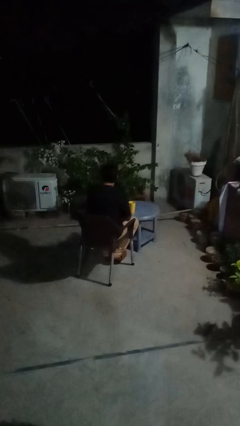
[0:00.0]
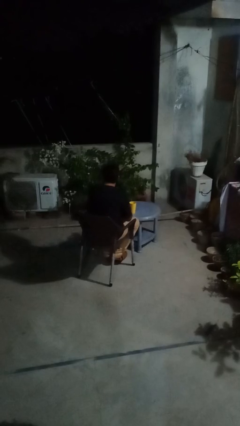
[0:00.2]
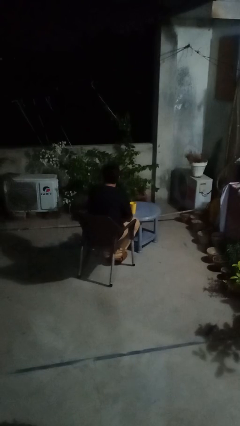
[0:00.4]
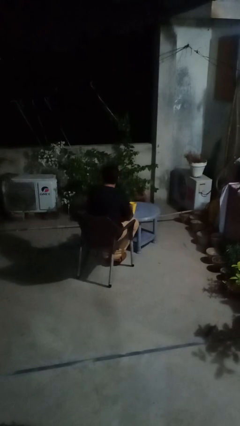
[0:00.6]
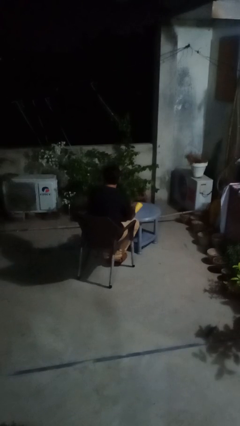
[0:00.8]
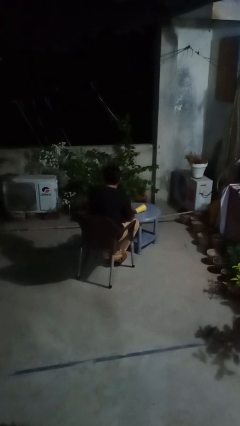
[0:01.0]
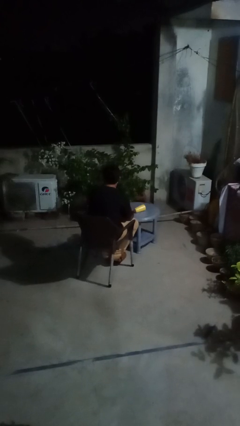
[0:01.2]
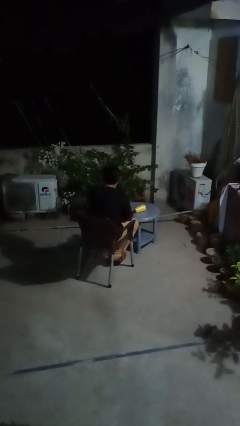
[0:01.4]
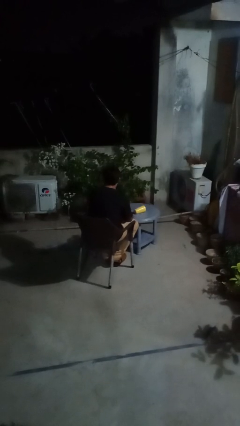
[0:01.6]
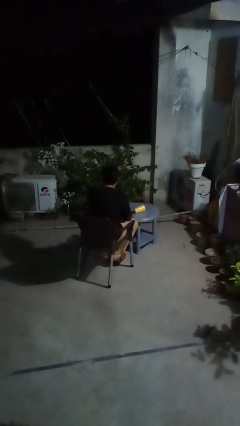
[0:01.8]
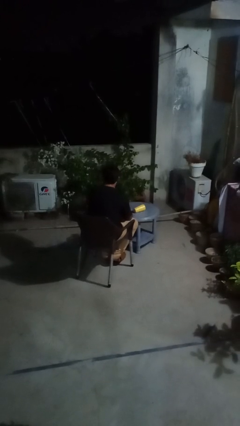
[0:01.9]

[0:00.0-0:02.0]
person knocks over glass

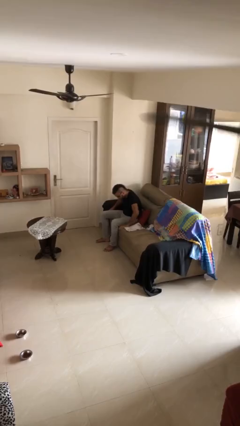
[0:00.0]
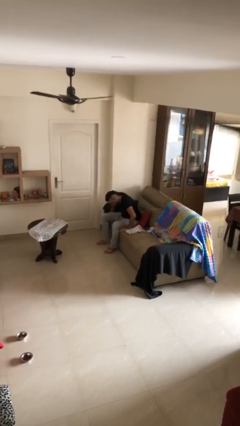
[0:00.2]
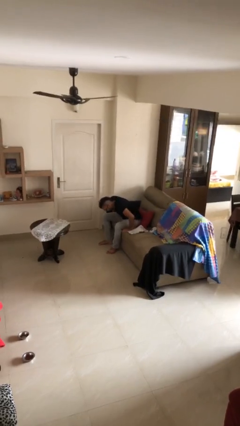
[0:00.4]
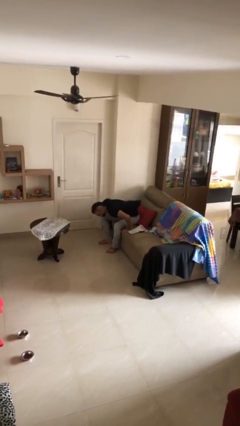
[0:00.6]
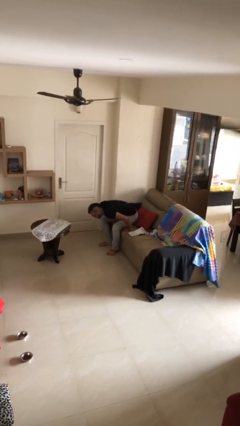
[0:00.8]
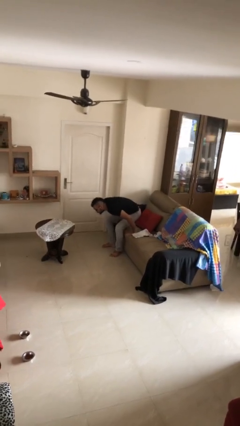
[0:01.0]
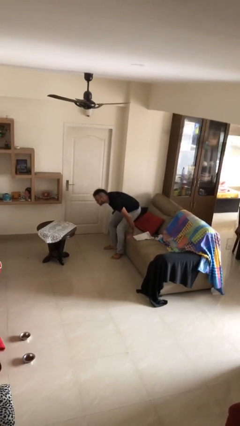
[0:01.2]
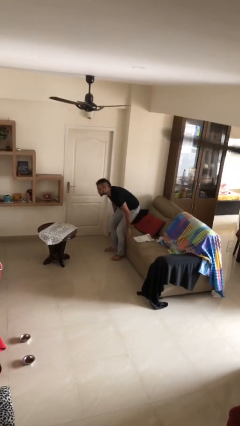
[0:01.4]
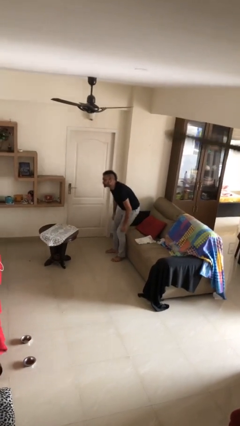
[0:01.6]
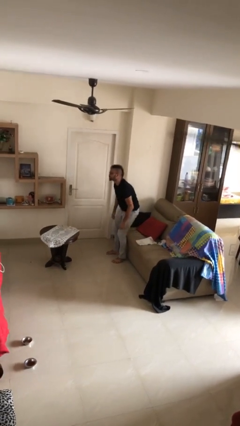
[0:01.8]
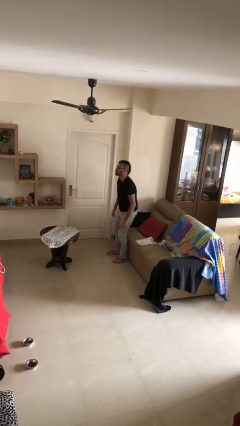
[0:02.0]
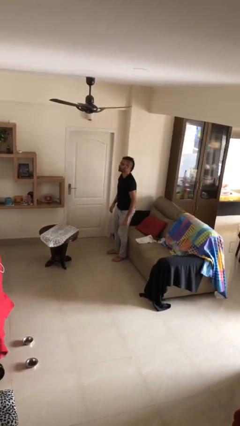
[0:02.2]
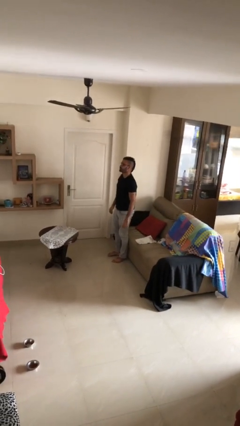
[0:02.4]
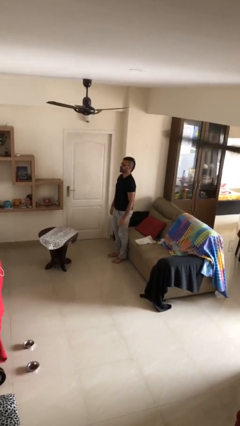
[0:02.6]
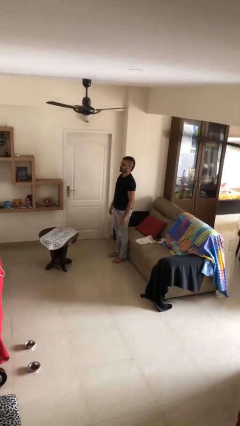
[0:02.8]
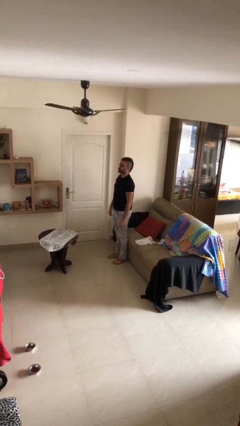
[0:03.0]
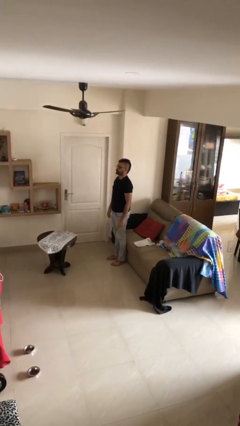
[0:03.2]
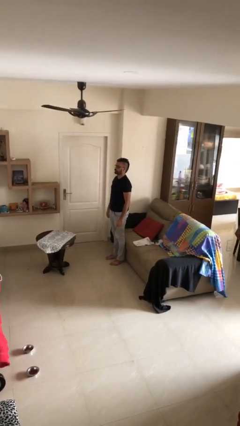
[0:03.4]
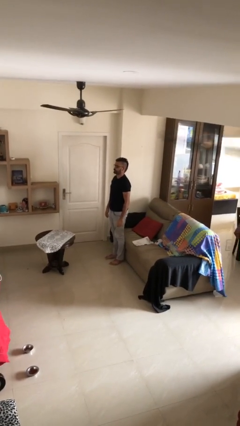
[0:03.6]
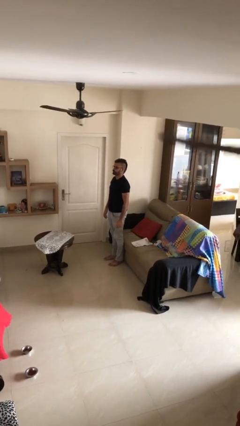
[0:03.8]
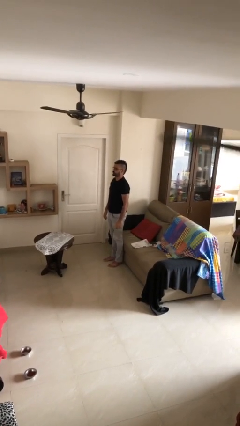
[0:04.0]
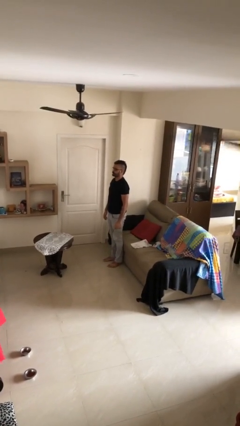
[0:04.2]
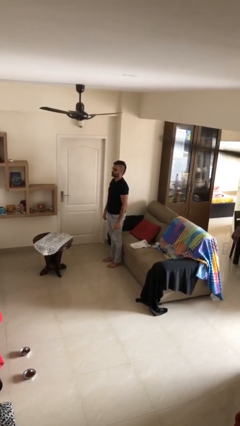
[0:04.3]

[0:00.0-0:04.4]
person stands up

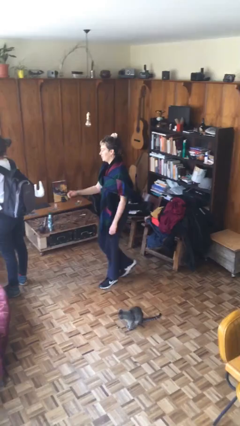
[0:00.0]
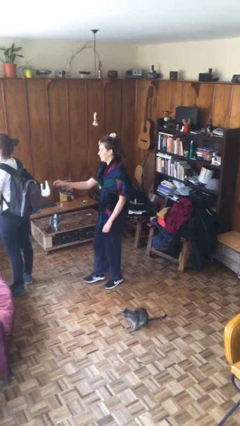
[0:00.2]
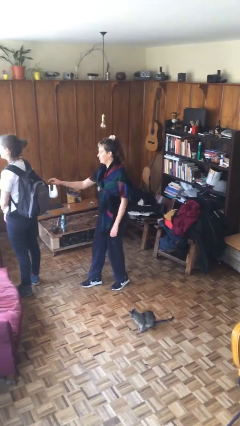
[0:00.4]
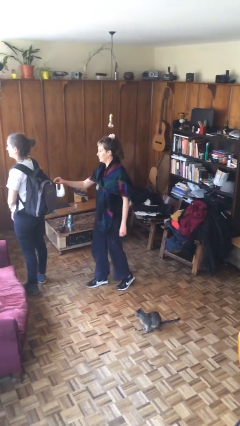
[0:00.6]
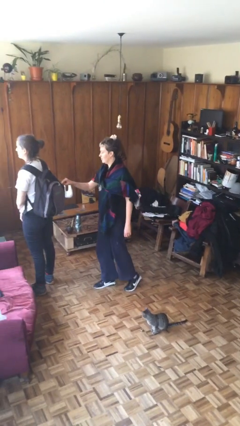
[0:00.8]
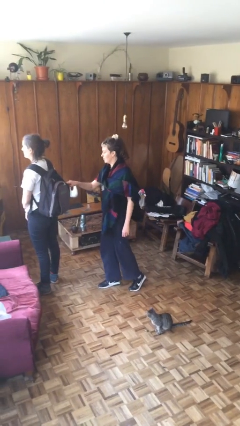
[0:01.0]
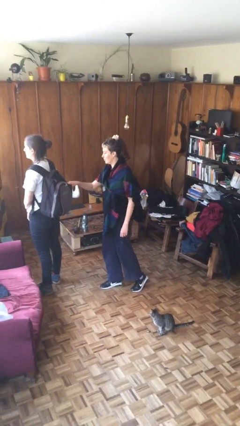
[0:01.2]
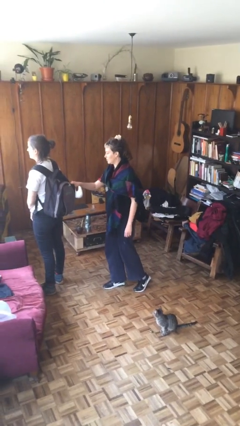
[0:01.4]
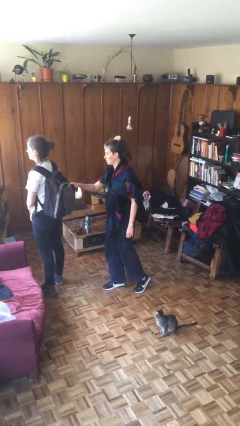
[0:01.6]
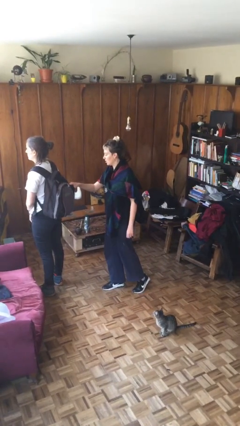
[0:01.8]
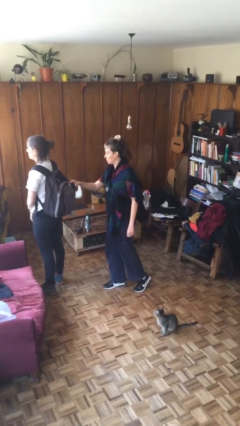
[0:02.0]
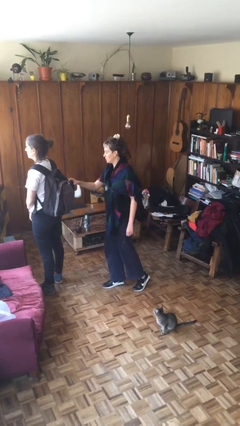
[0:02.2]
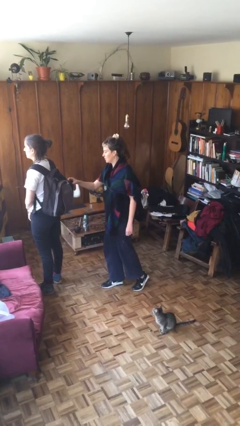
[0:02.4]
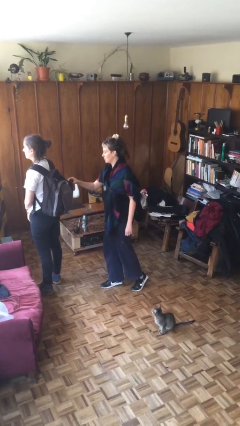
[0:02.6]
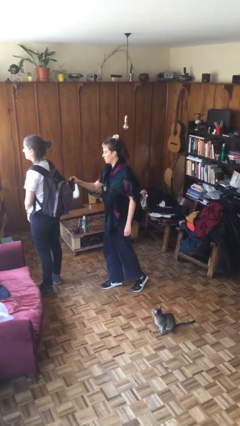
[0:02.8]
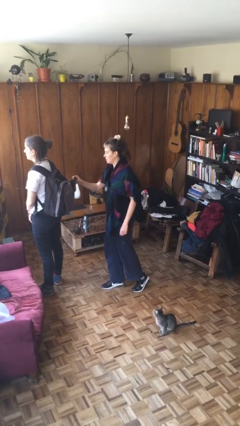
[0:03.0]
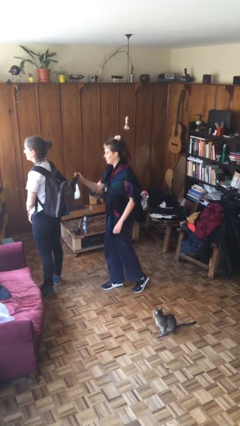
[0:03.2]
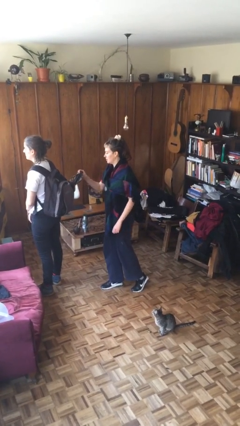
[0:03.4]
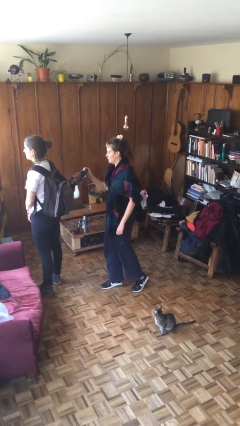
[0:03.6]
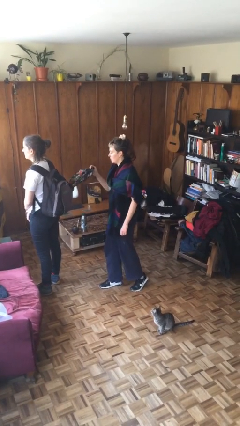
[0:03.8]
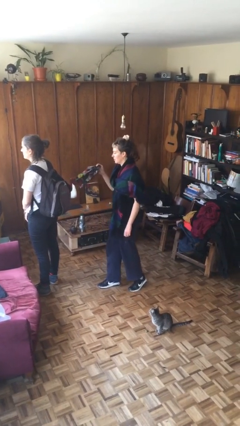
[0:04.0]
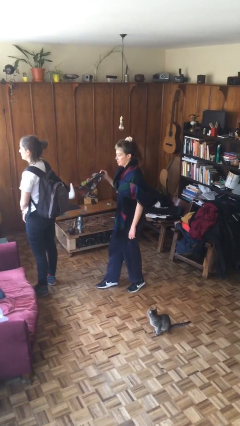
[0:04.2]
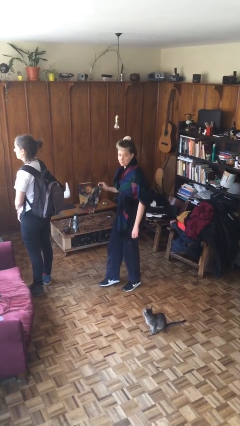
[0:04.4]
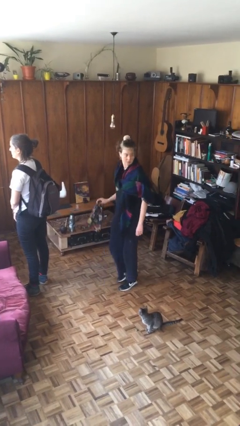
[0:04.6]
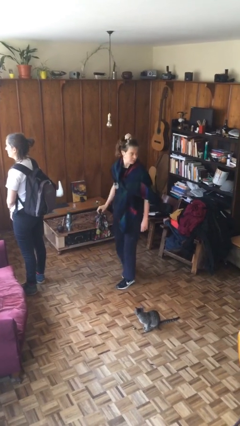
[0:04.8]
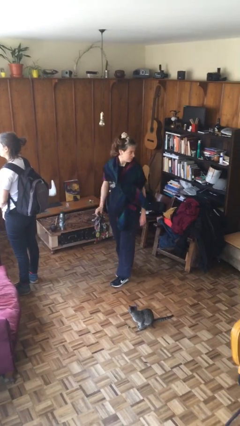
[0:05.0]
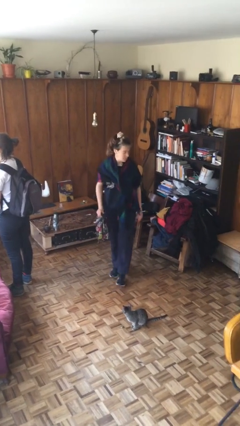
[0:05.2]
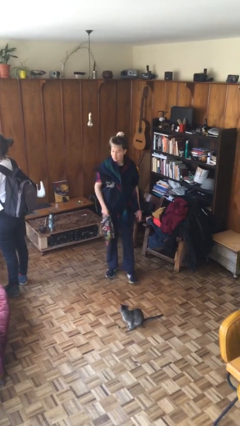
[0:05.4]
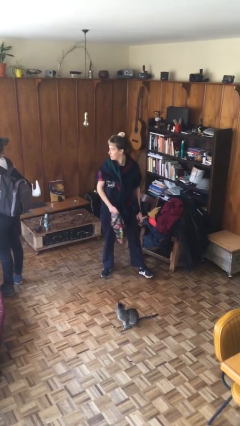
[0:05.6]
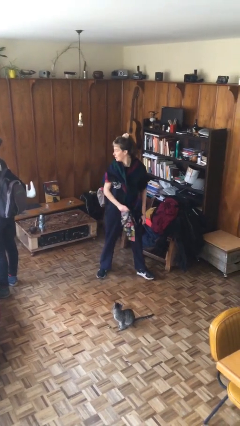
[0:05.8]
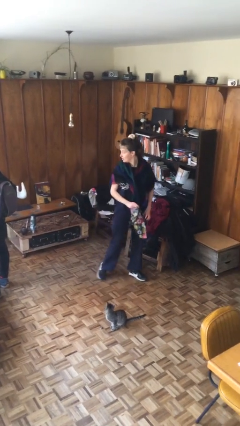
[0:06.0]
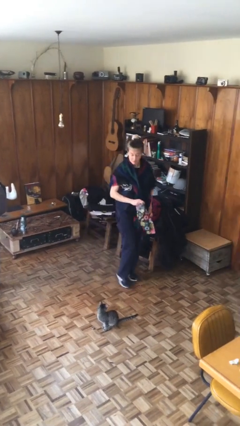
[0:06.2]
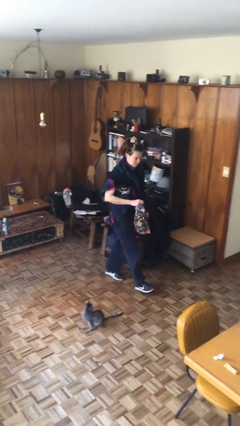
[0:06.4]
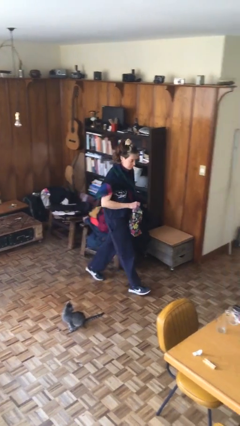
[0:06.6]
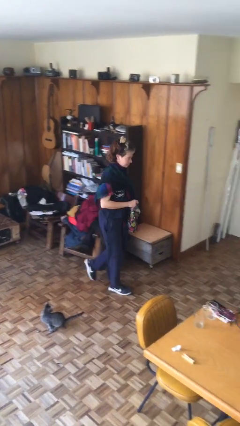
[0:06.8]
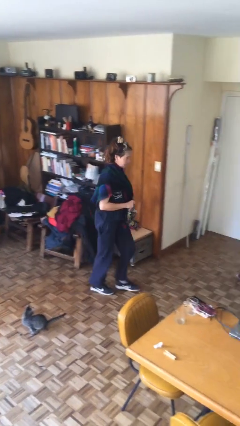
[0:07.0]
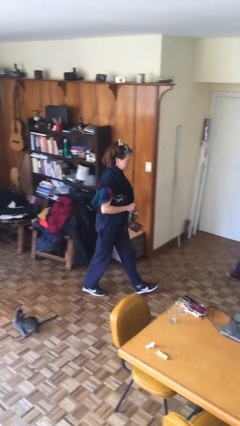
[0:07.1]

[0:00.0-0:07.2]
person steals object from person

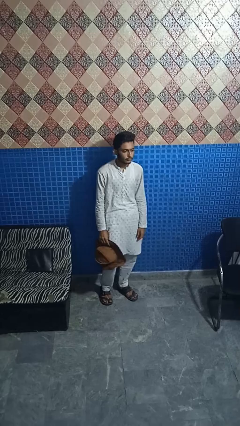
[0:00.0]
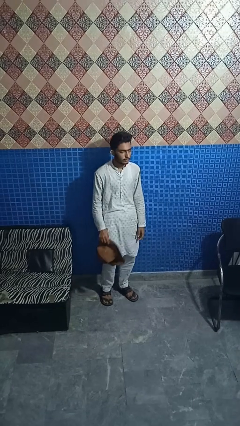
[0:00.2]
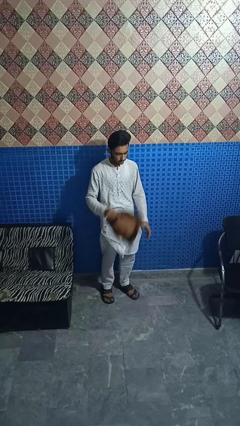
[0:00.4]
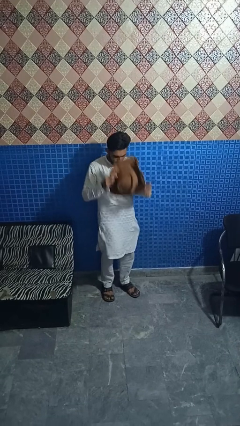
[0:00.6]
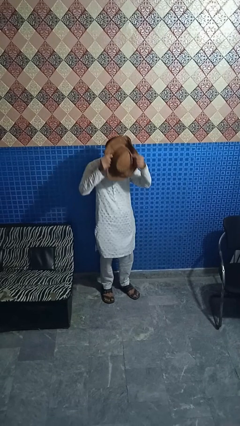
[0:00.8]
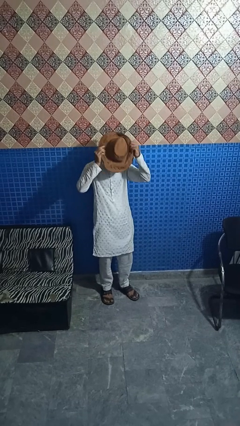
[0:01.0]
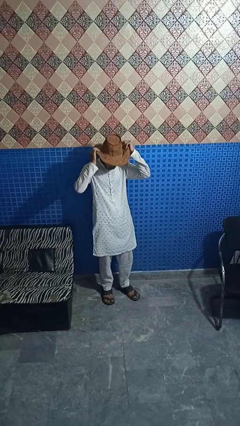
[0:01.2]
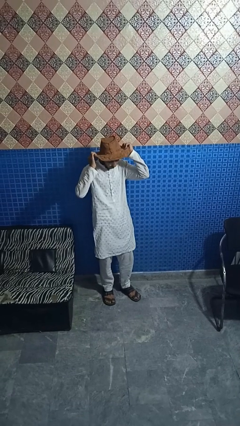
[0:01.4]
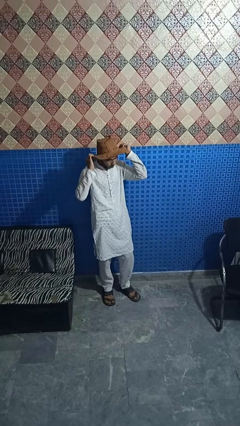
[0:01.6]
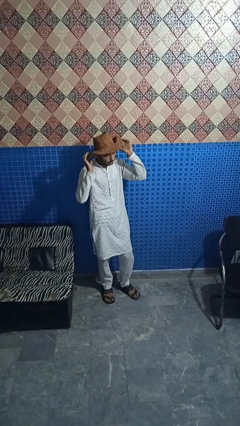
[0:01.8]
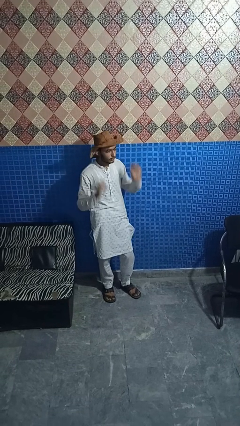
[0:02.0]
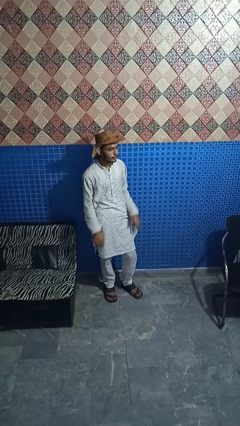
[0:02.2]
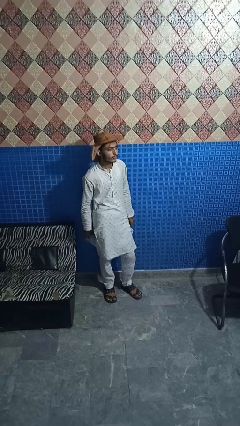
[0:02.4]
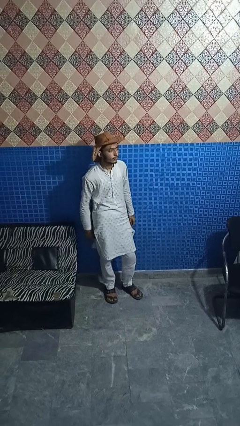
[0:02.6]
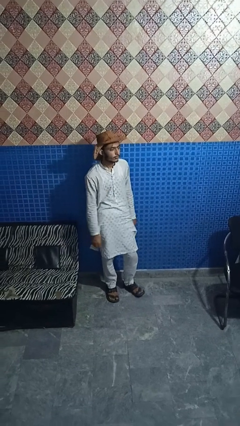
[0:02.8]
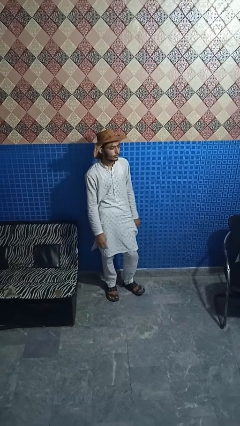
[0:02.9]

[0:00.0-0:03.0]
person puts on hat

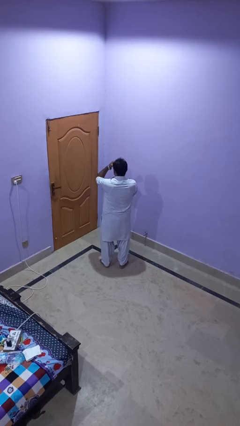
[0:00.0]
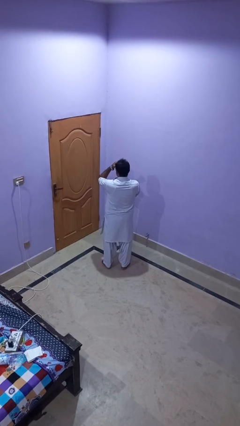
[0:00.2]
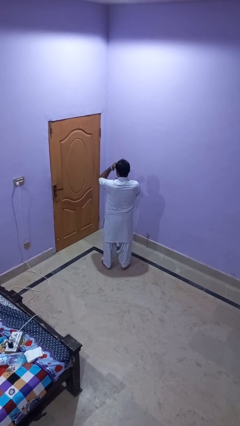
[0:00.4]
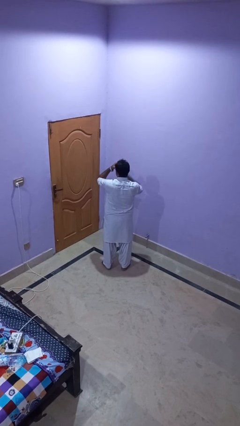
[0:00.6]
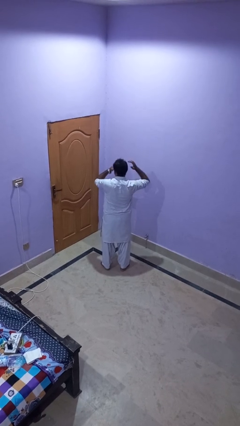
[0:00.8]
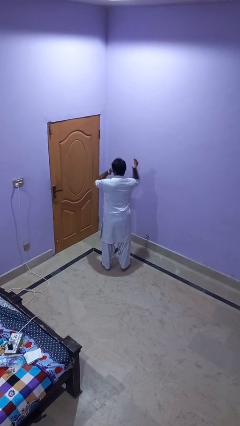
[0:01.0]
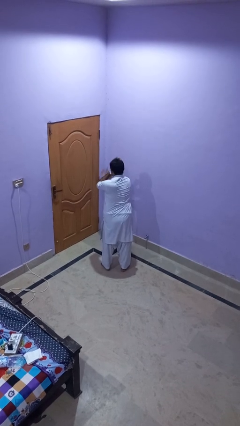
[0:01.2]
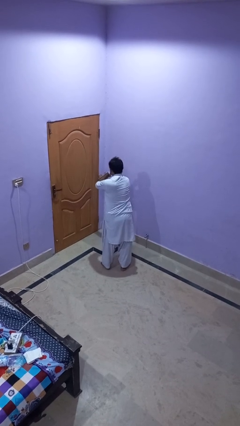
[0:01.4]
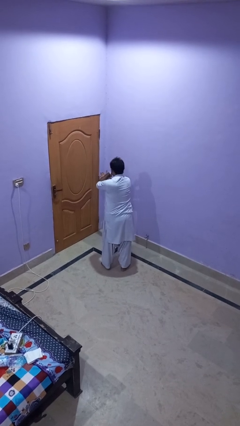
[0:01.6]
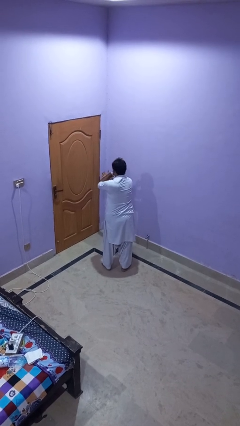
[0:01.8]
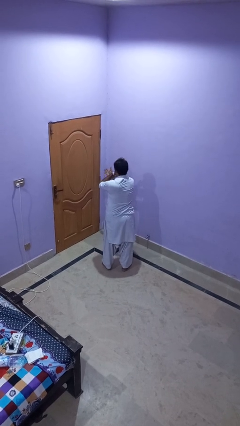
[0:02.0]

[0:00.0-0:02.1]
person karate chop
